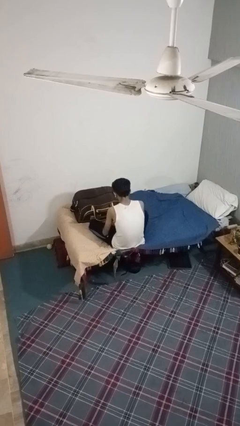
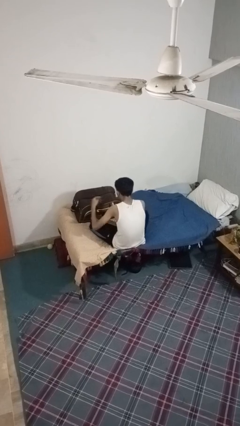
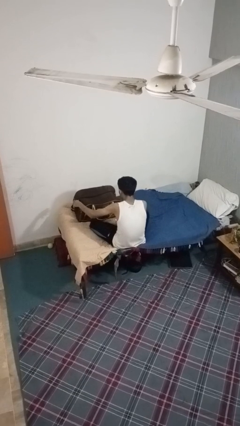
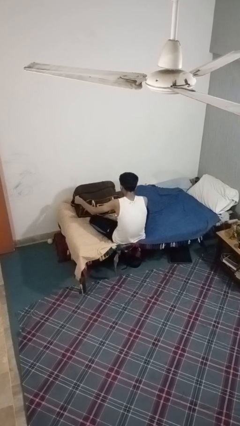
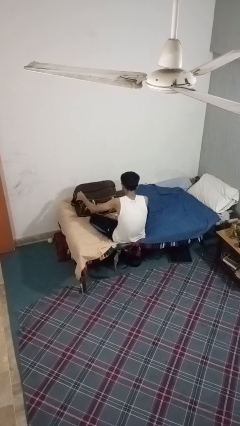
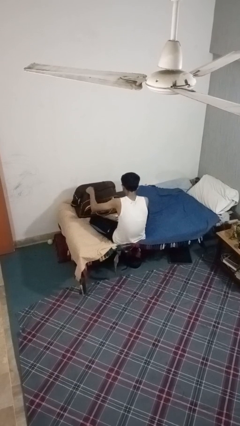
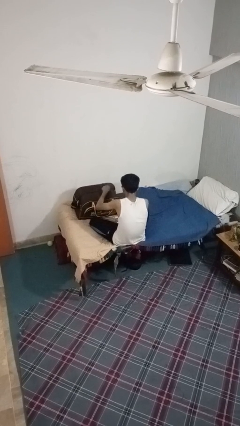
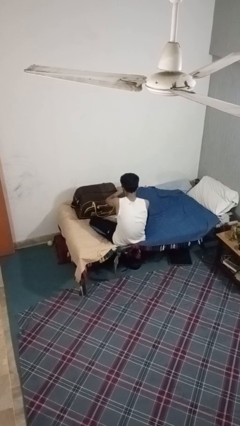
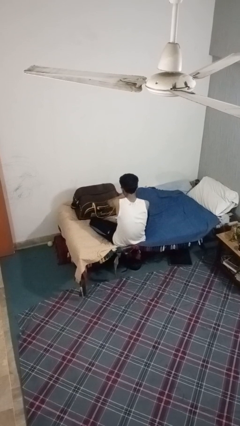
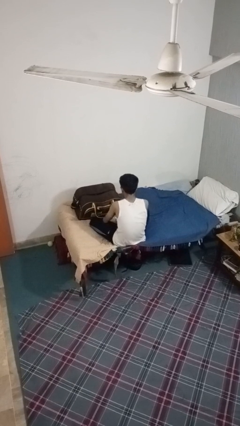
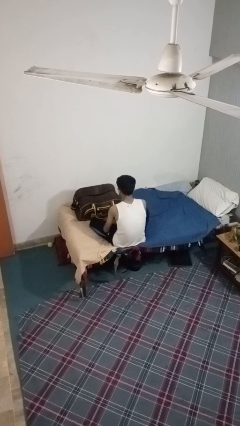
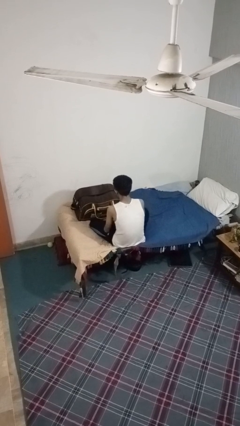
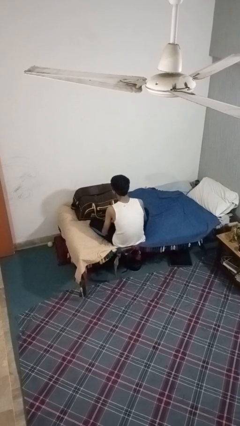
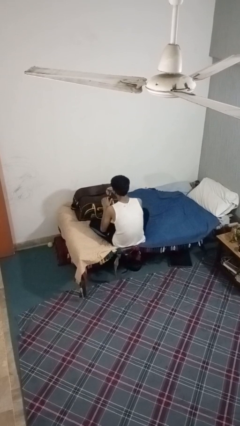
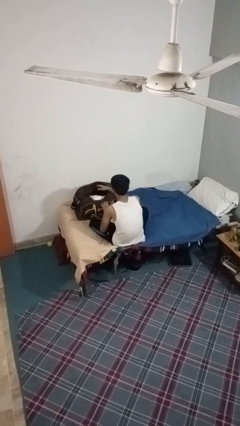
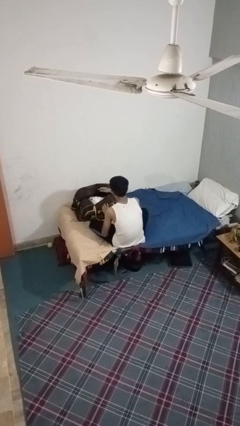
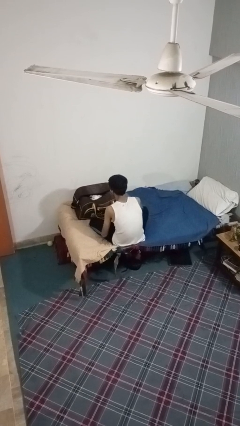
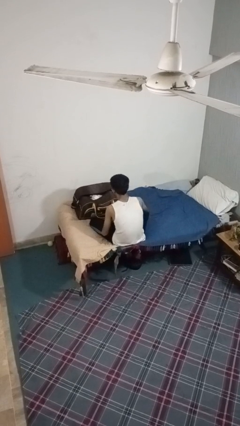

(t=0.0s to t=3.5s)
person opens suitcase

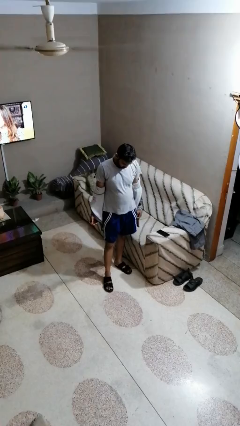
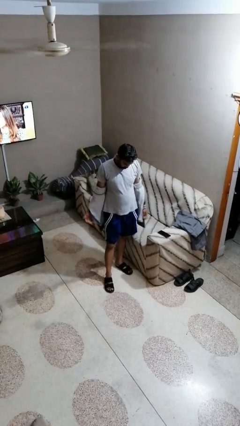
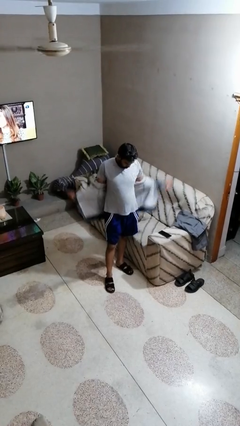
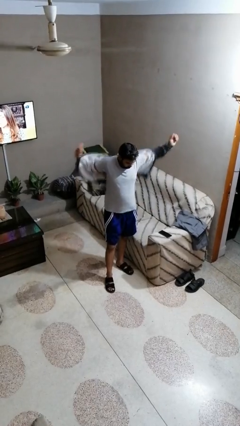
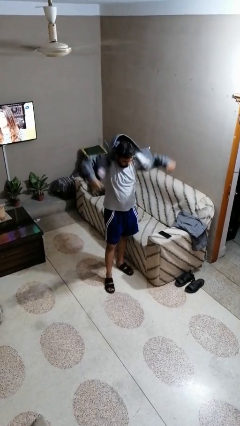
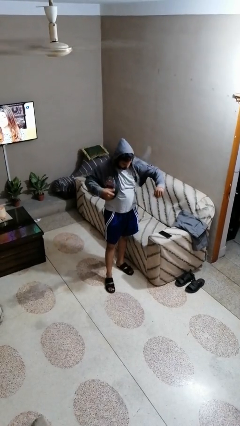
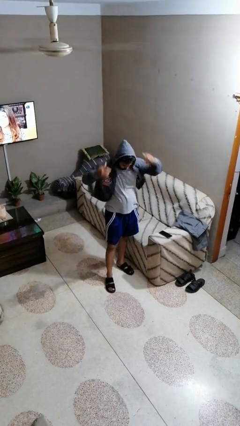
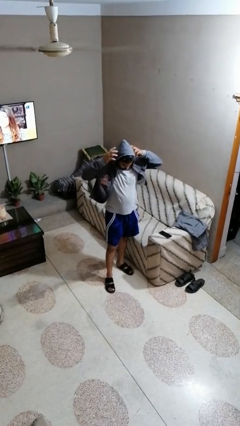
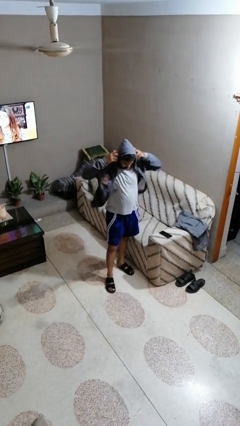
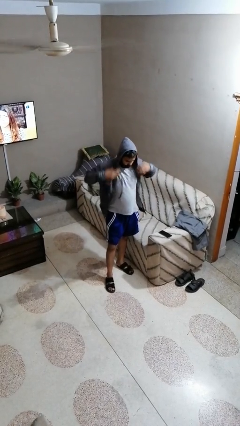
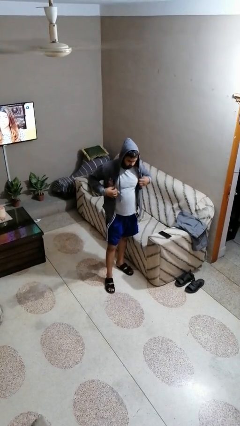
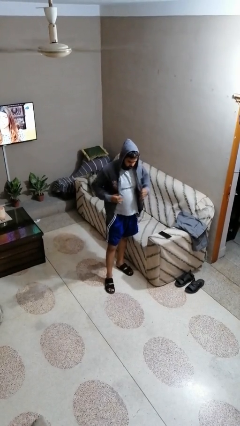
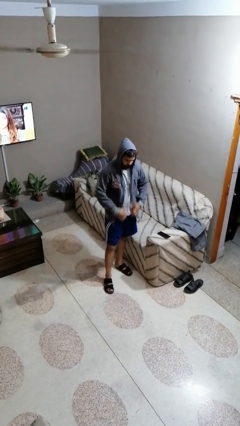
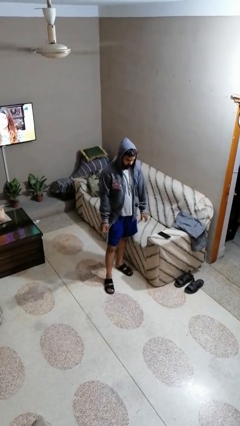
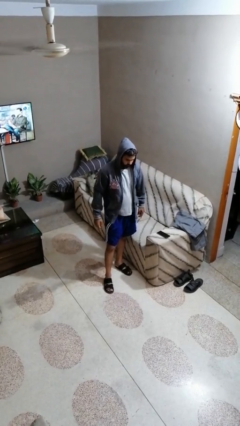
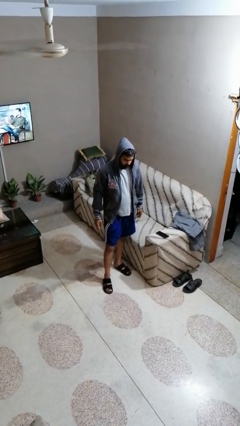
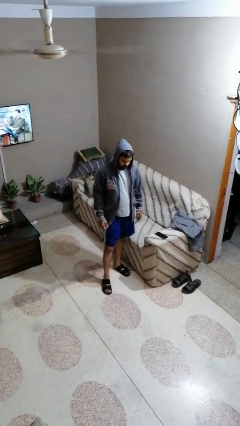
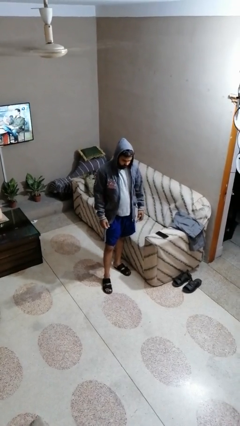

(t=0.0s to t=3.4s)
person puts on hoodie

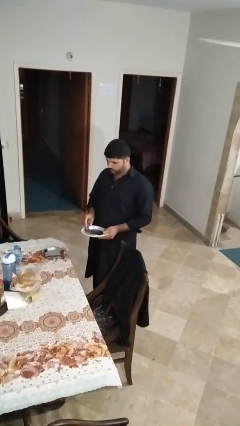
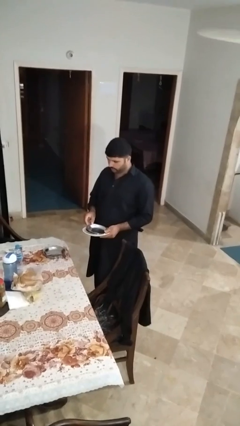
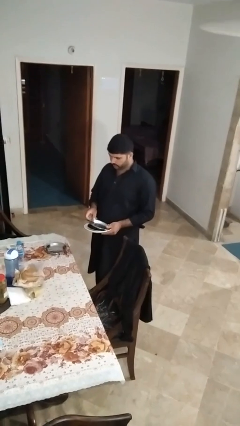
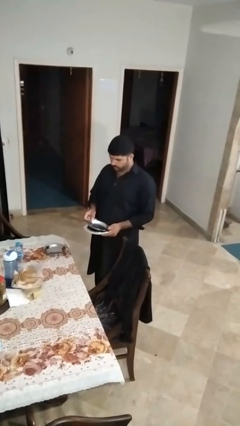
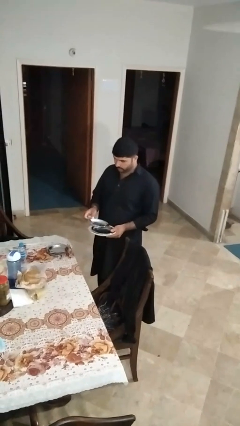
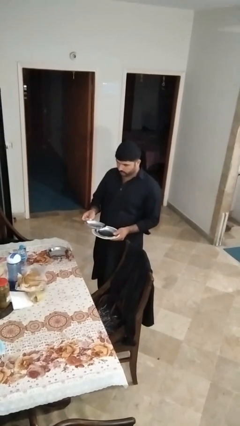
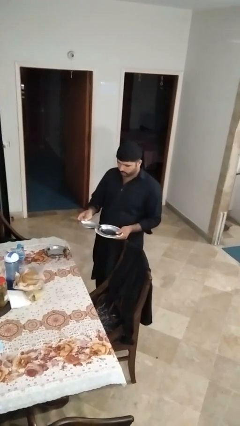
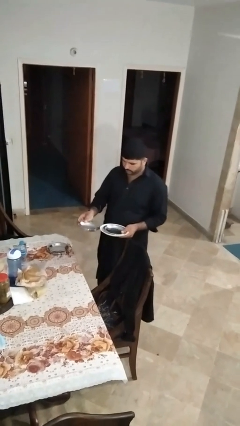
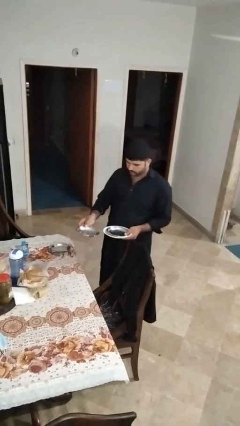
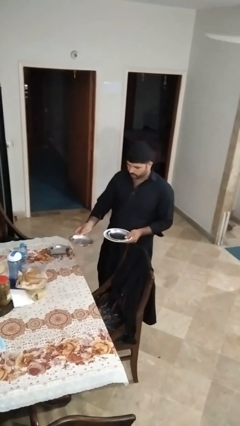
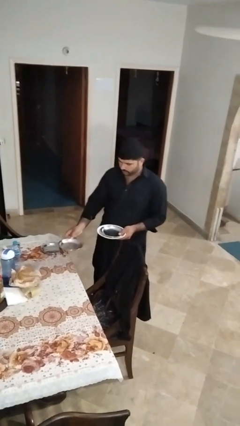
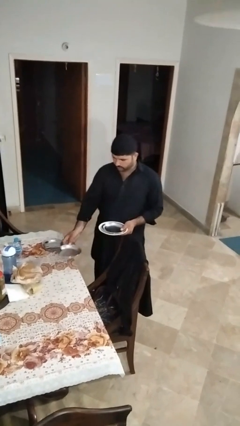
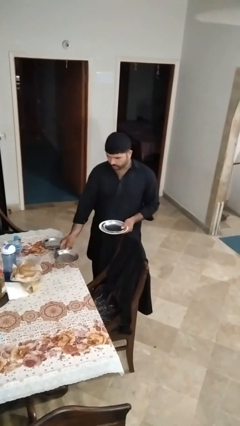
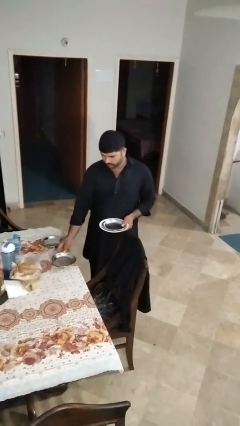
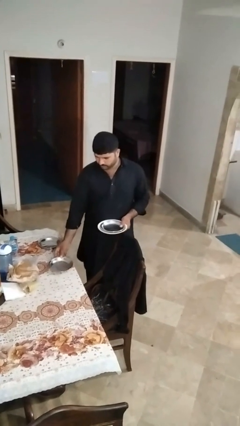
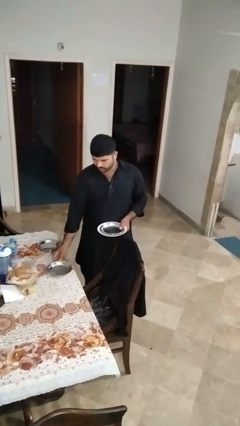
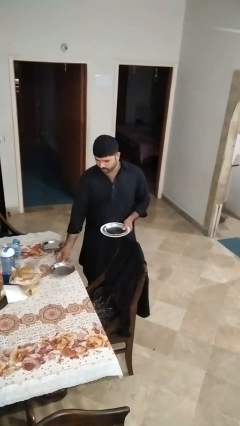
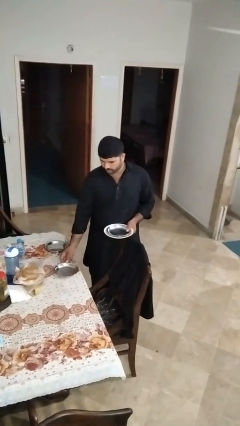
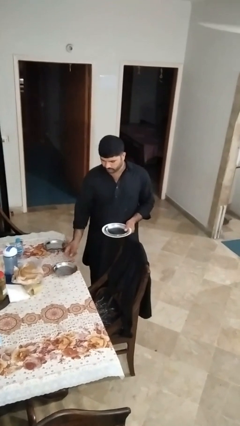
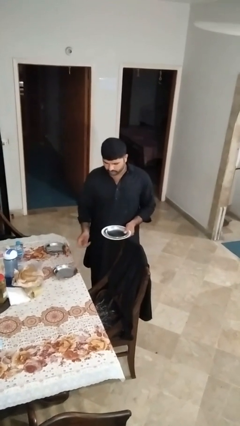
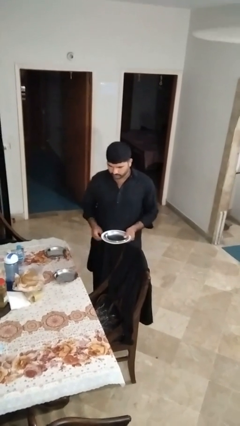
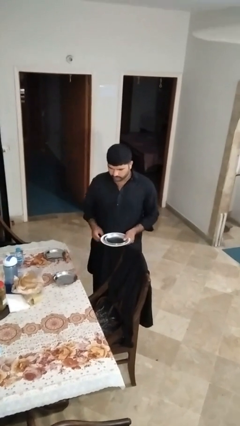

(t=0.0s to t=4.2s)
person sets table

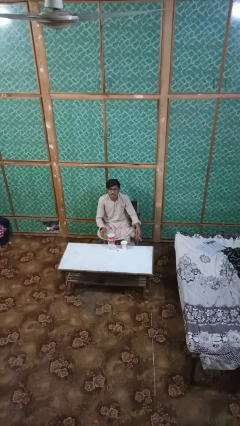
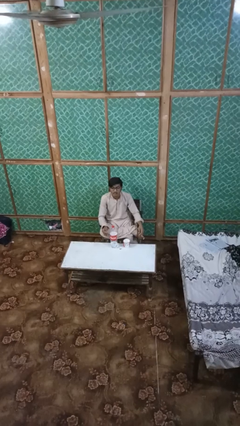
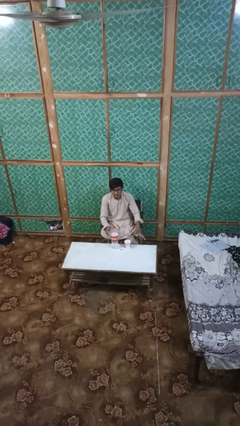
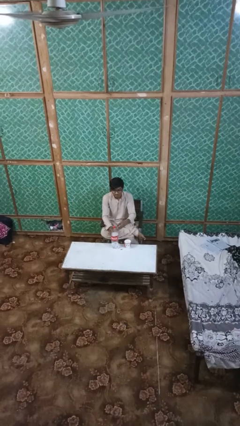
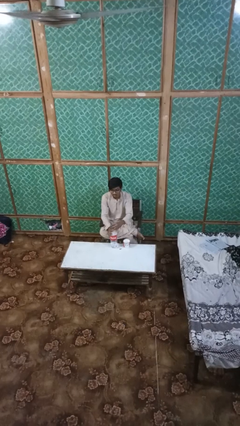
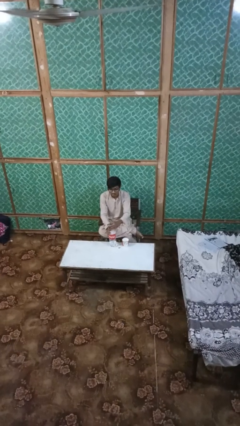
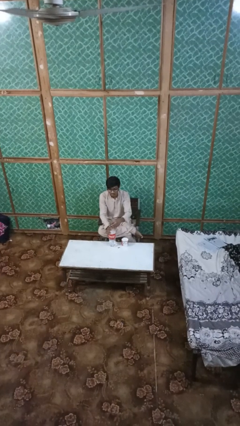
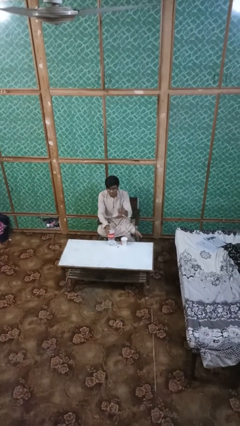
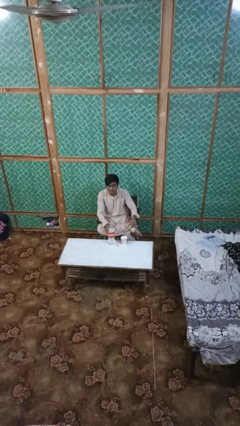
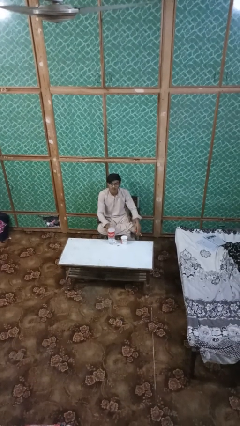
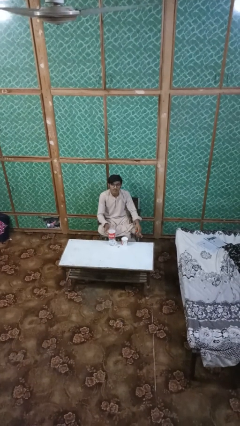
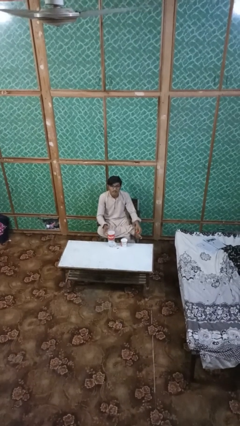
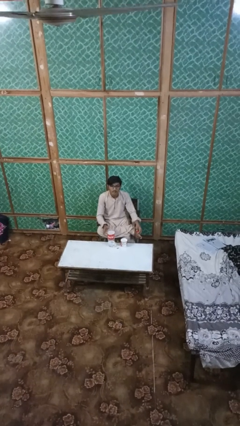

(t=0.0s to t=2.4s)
person unscrews lid from bottle

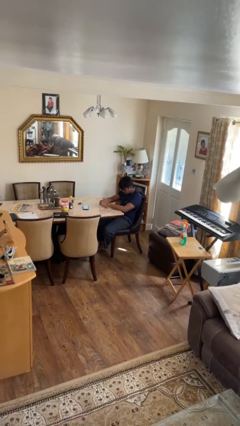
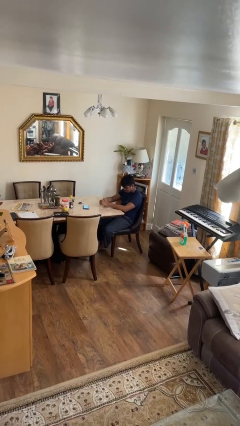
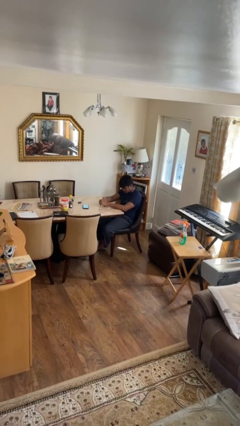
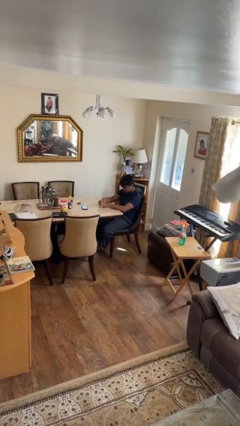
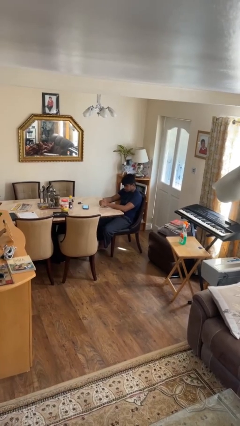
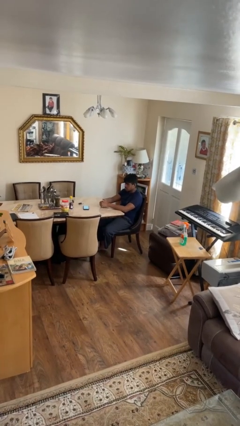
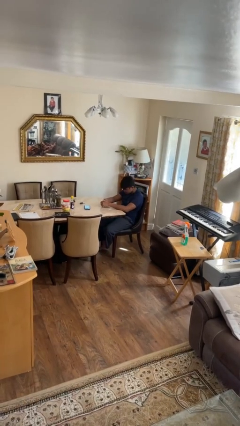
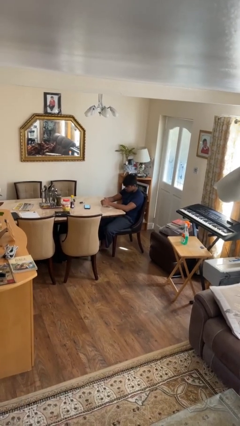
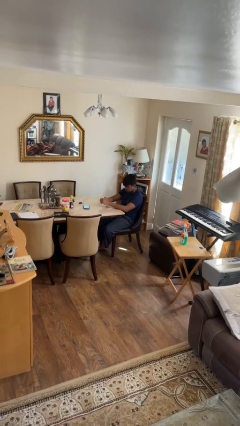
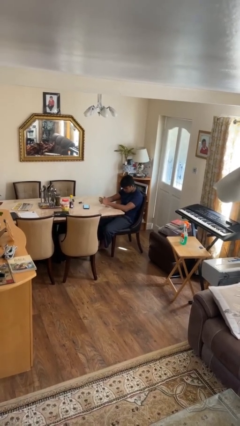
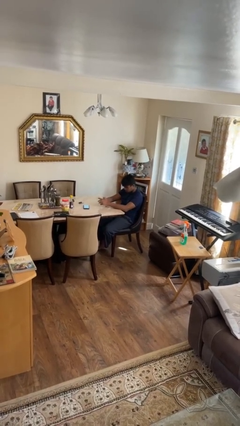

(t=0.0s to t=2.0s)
person nods head

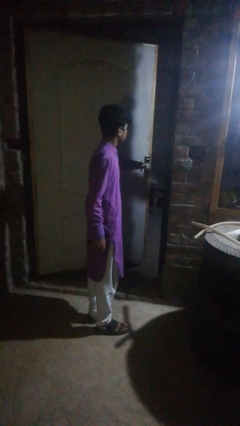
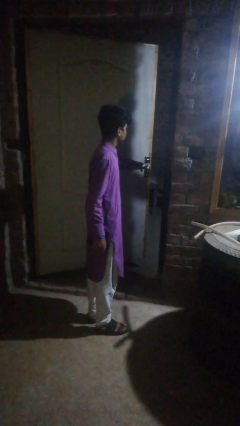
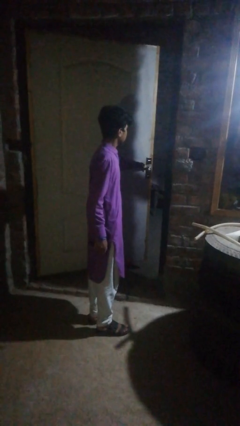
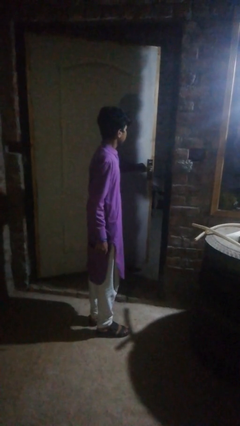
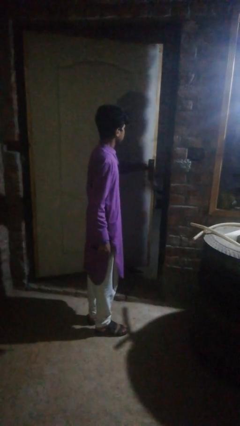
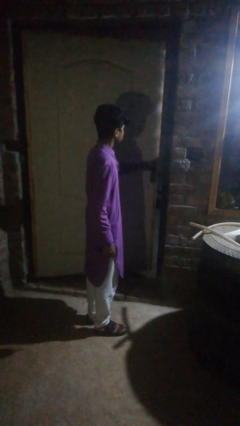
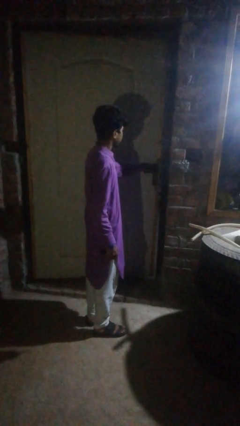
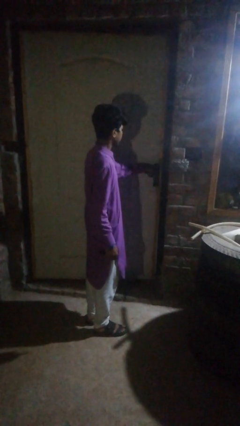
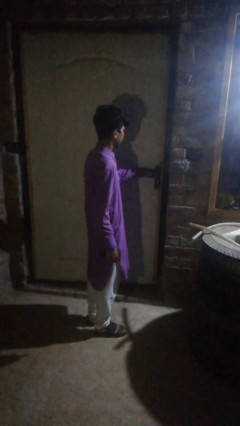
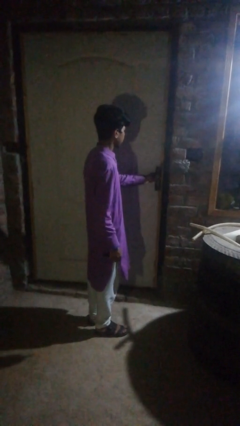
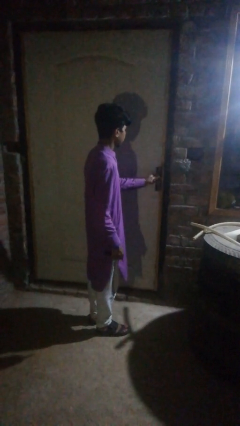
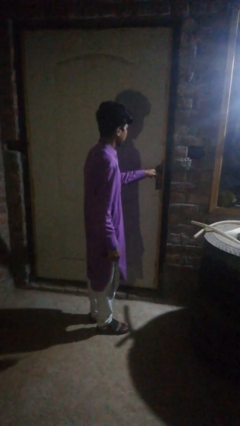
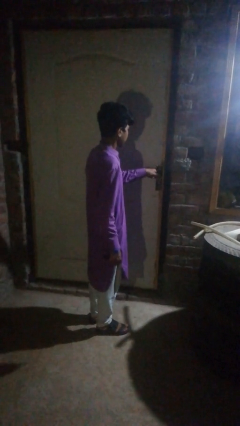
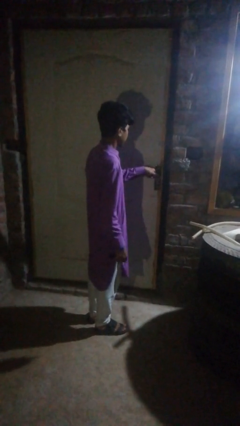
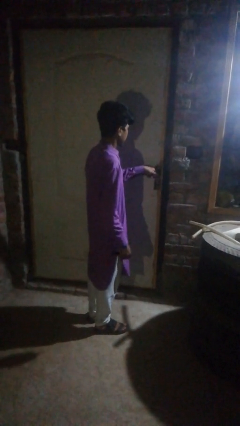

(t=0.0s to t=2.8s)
person closes facility door
